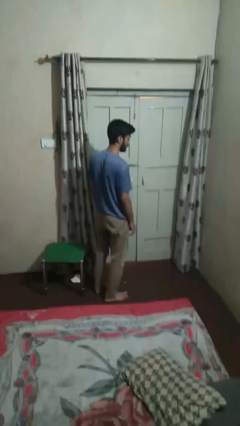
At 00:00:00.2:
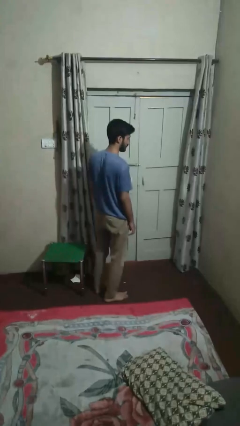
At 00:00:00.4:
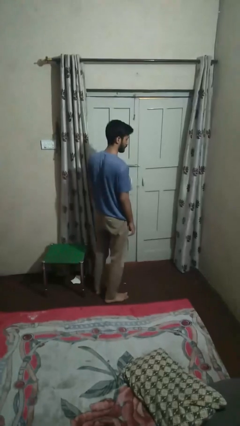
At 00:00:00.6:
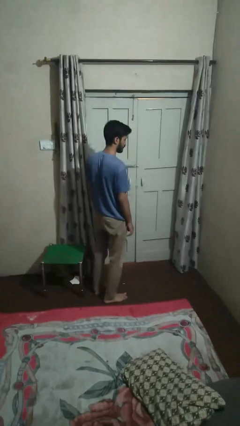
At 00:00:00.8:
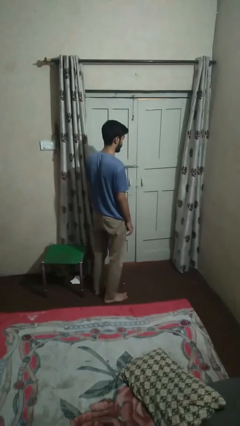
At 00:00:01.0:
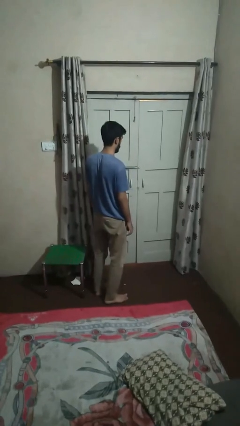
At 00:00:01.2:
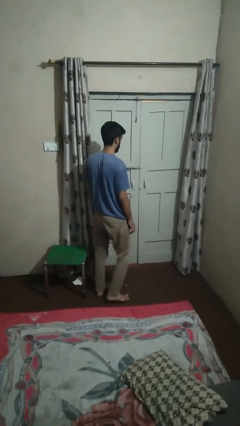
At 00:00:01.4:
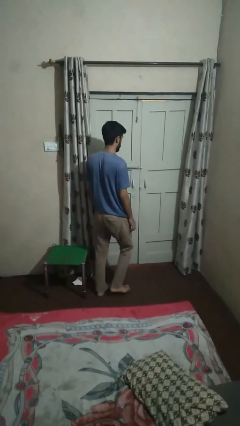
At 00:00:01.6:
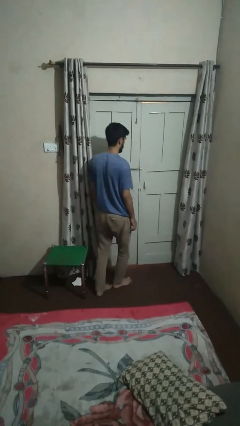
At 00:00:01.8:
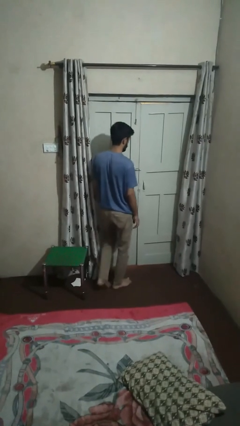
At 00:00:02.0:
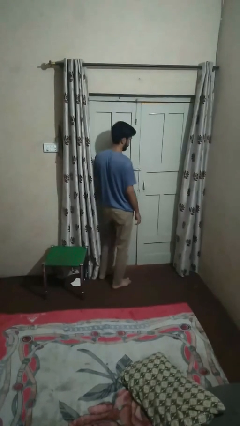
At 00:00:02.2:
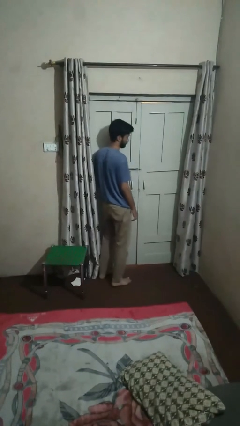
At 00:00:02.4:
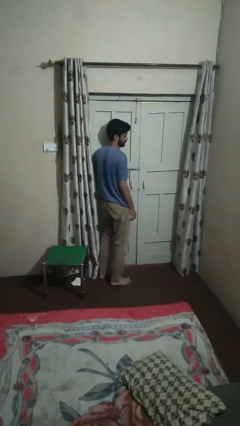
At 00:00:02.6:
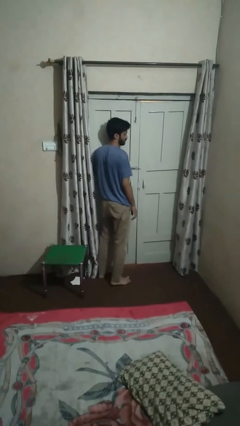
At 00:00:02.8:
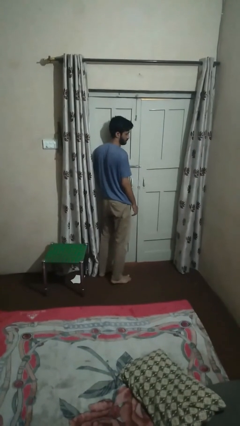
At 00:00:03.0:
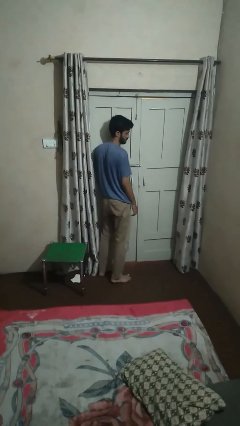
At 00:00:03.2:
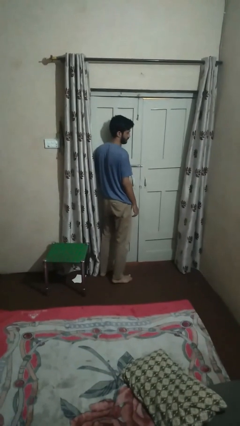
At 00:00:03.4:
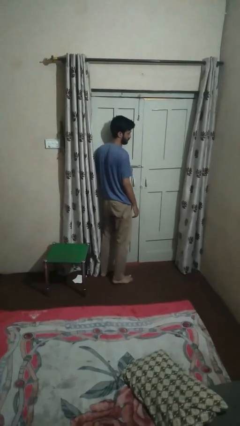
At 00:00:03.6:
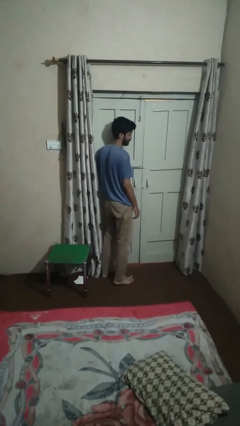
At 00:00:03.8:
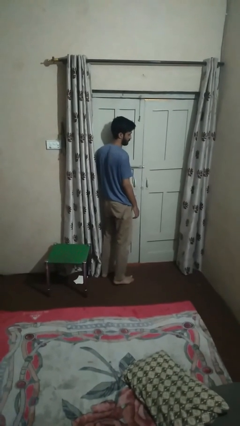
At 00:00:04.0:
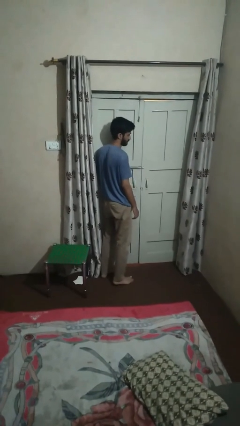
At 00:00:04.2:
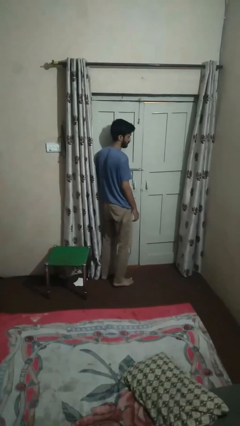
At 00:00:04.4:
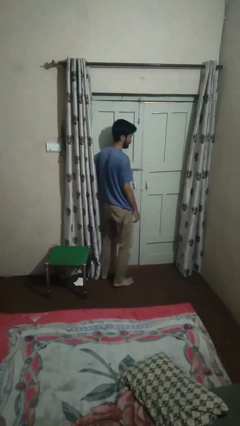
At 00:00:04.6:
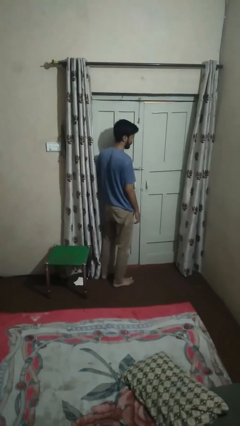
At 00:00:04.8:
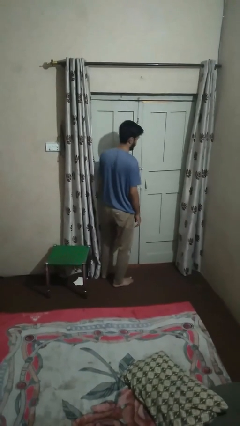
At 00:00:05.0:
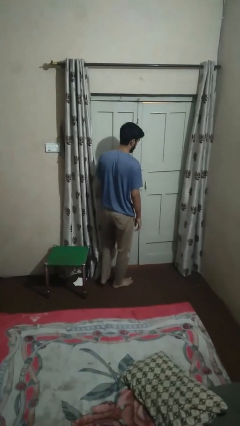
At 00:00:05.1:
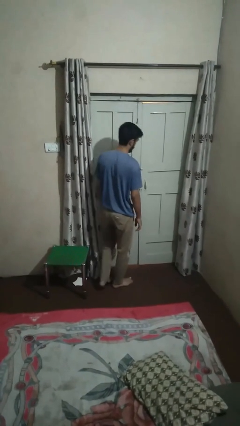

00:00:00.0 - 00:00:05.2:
person bumps into wall

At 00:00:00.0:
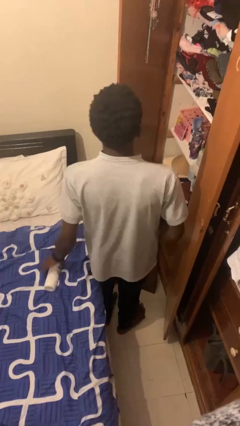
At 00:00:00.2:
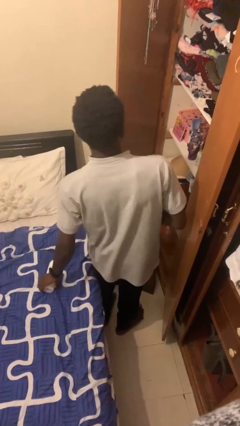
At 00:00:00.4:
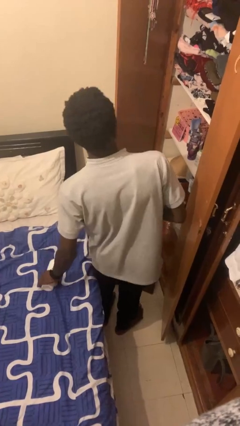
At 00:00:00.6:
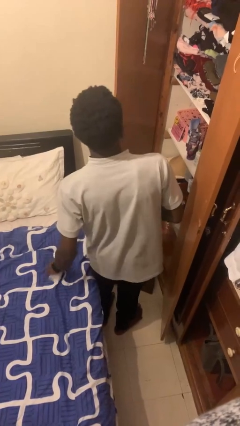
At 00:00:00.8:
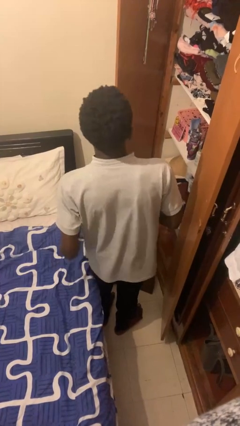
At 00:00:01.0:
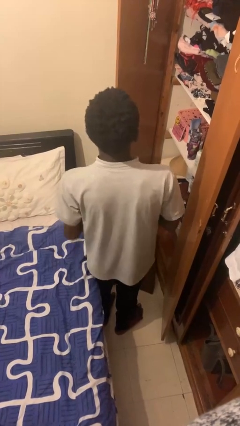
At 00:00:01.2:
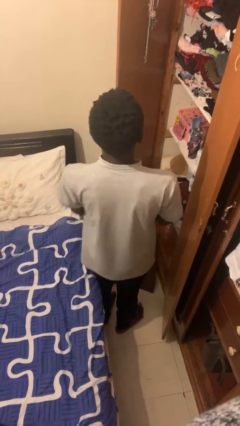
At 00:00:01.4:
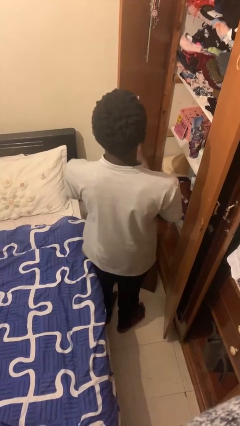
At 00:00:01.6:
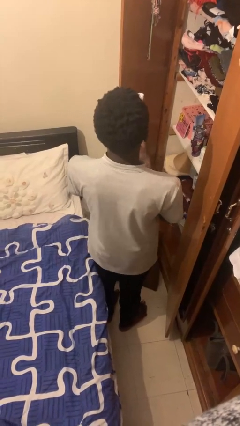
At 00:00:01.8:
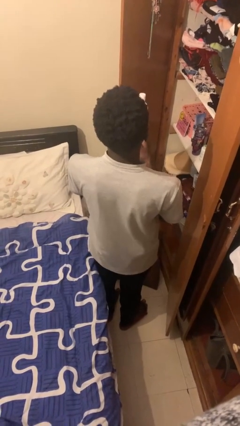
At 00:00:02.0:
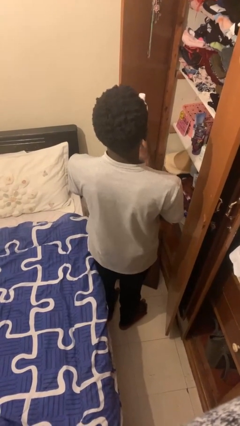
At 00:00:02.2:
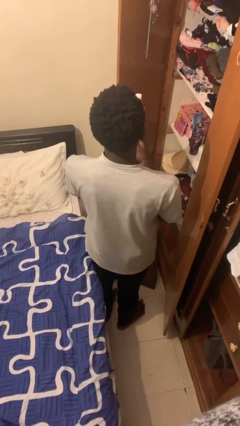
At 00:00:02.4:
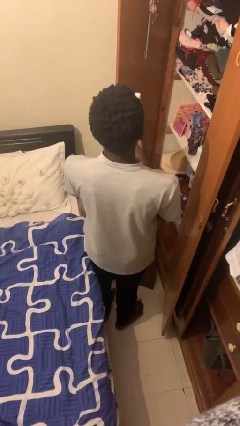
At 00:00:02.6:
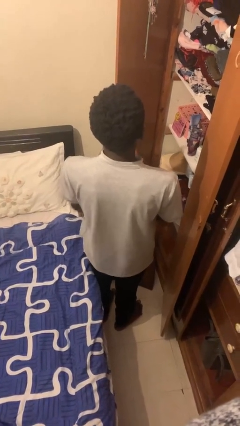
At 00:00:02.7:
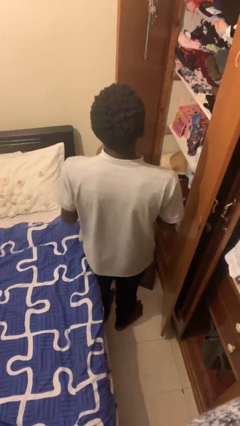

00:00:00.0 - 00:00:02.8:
person picks up object from cabinet

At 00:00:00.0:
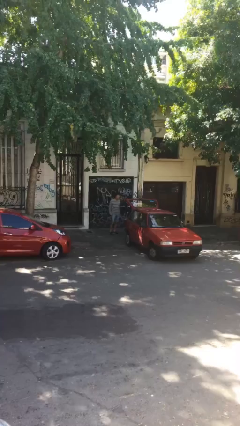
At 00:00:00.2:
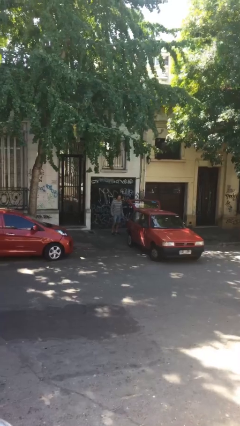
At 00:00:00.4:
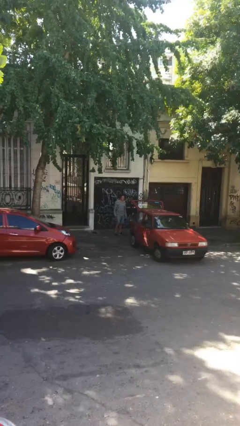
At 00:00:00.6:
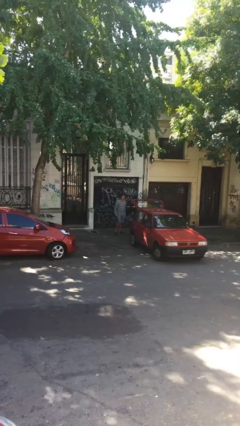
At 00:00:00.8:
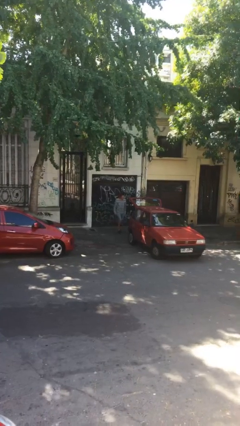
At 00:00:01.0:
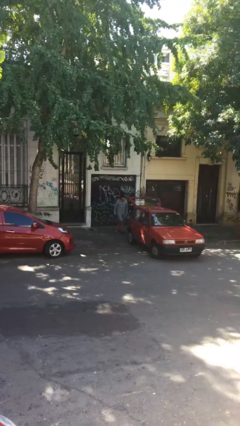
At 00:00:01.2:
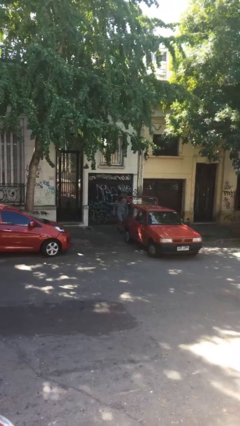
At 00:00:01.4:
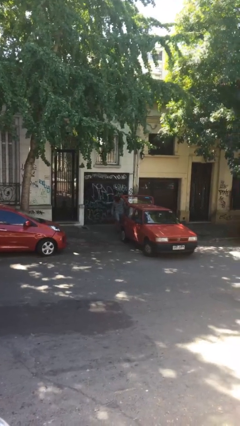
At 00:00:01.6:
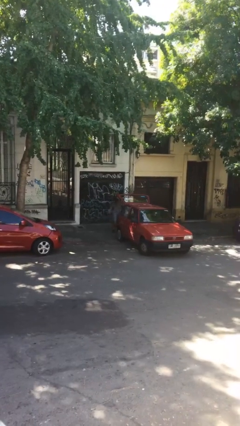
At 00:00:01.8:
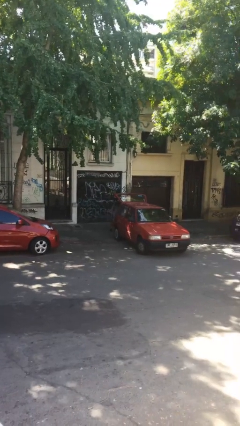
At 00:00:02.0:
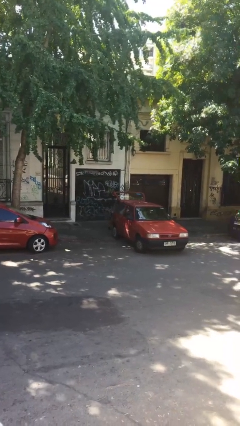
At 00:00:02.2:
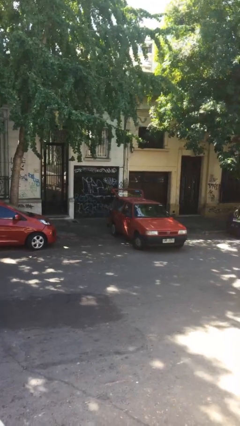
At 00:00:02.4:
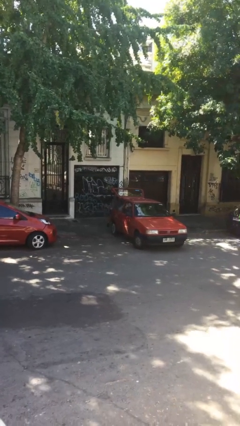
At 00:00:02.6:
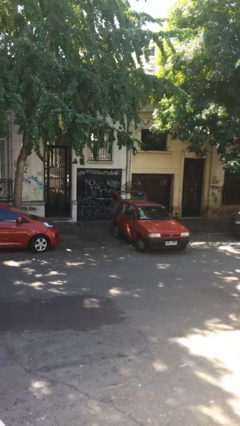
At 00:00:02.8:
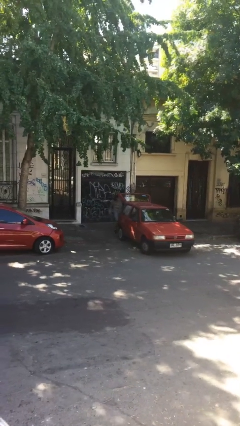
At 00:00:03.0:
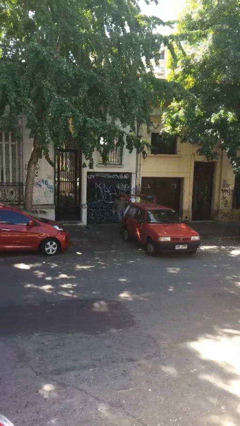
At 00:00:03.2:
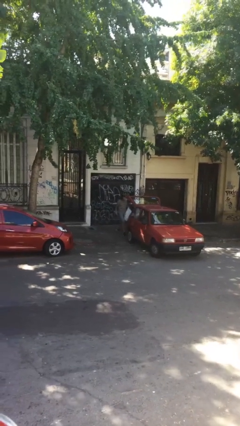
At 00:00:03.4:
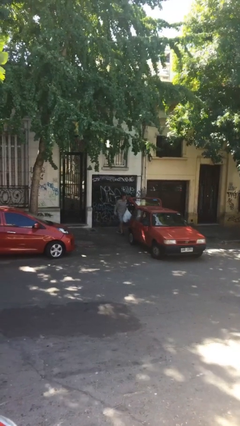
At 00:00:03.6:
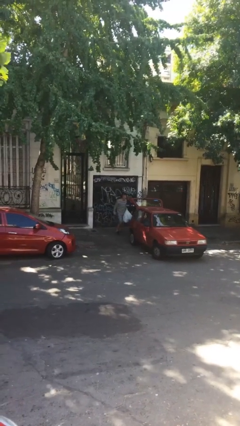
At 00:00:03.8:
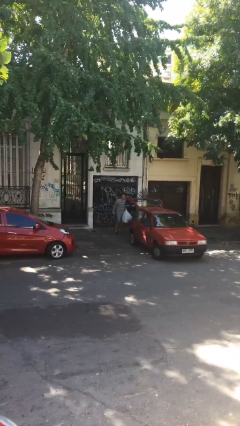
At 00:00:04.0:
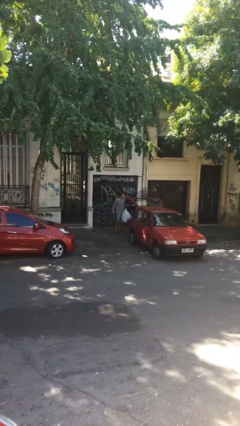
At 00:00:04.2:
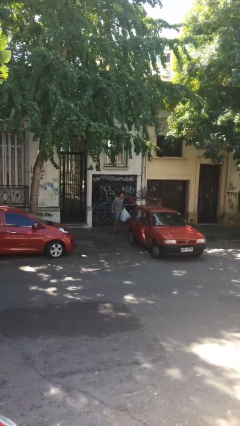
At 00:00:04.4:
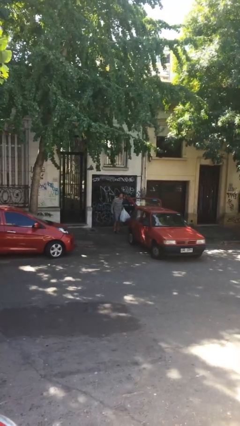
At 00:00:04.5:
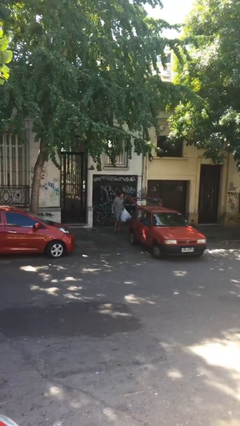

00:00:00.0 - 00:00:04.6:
person unloads car

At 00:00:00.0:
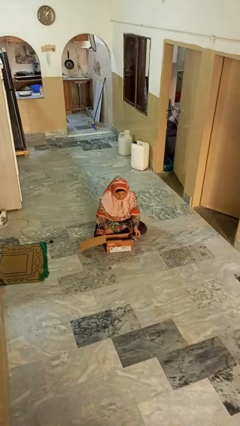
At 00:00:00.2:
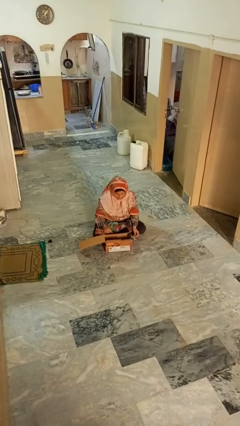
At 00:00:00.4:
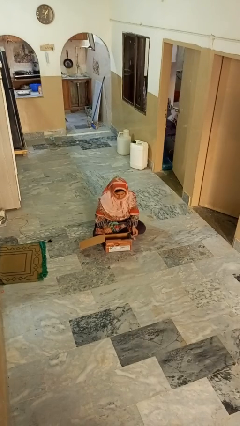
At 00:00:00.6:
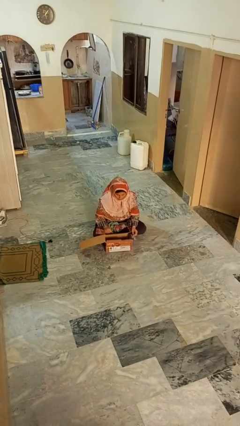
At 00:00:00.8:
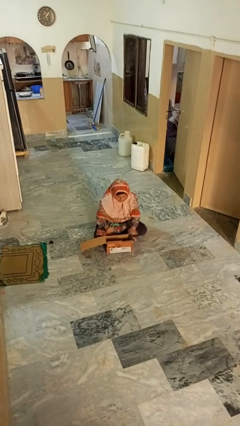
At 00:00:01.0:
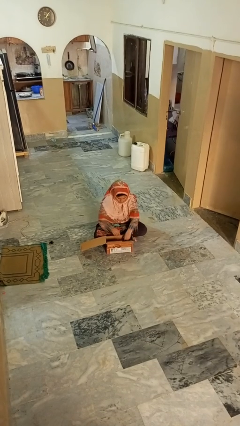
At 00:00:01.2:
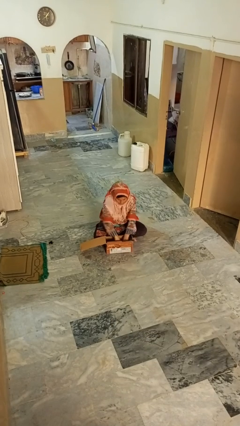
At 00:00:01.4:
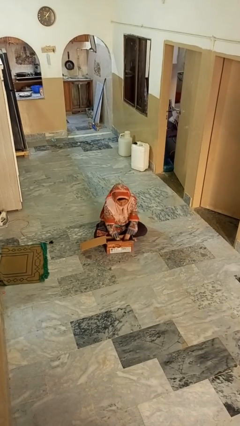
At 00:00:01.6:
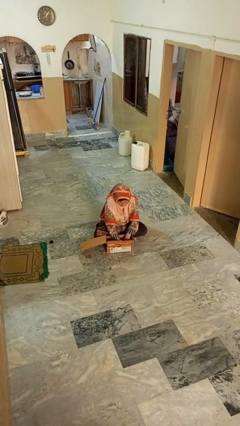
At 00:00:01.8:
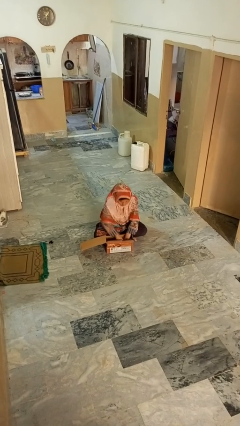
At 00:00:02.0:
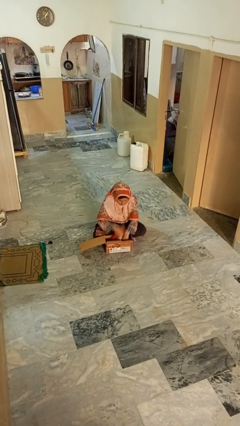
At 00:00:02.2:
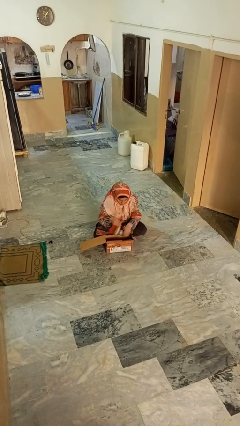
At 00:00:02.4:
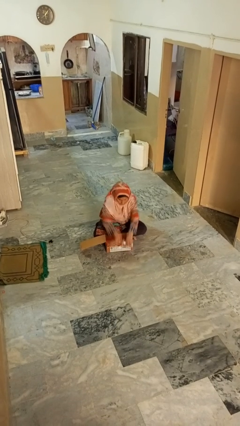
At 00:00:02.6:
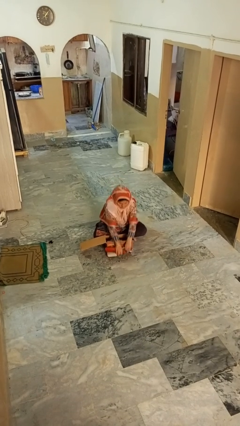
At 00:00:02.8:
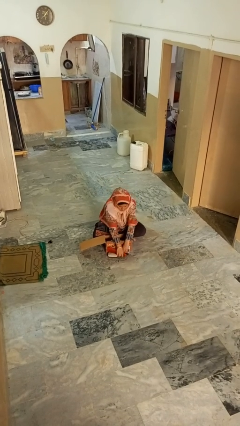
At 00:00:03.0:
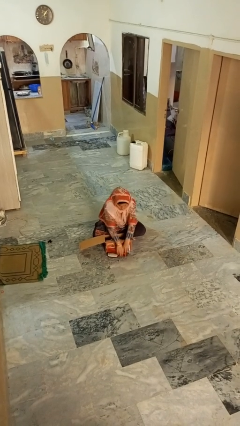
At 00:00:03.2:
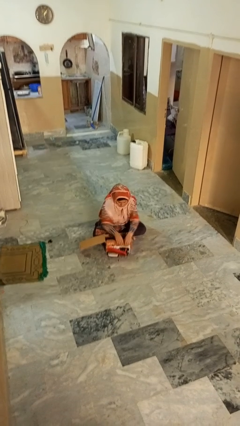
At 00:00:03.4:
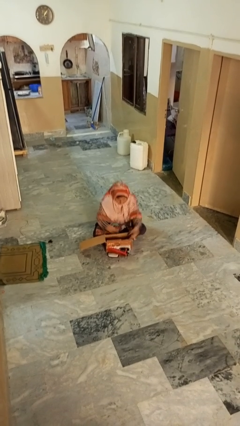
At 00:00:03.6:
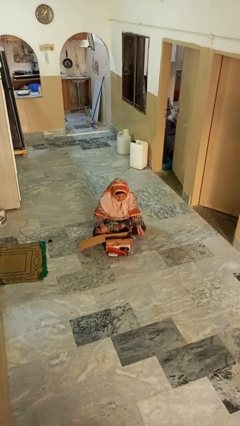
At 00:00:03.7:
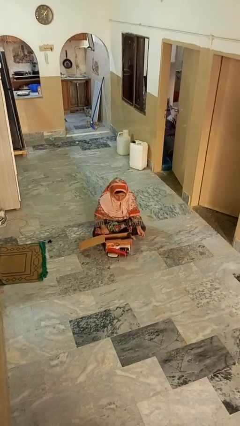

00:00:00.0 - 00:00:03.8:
person takes object from box

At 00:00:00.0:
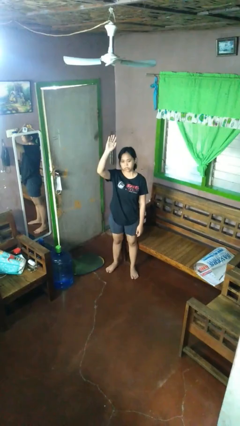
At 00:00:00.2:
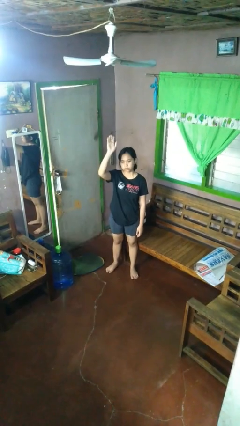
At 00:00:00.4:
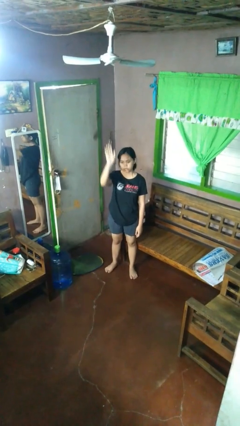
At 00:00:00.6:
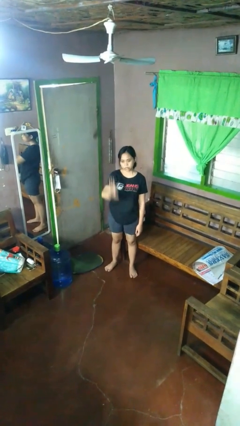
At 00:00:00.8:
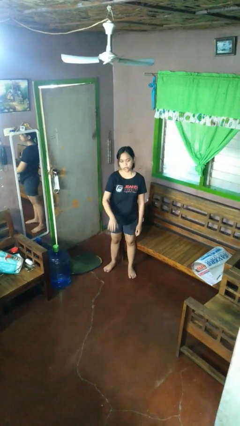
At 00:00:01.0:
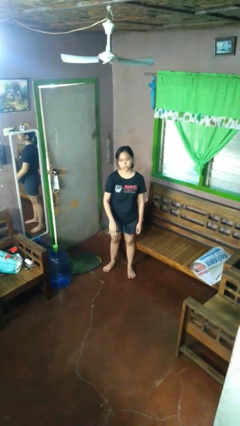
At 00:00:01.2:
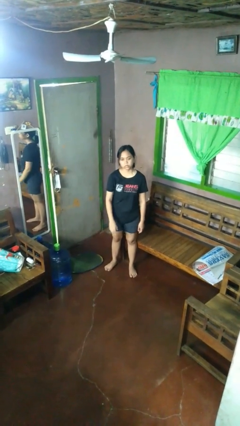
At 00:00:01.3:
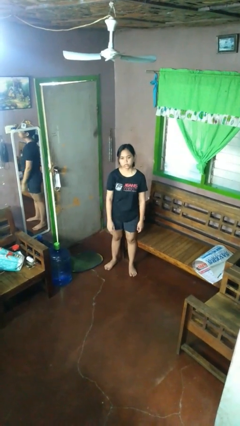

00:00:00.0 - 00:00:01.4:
person gestures swipe down
